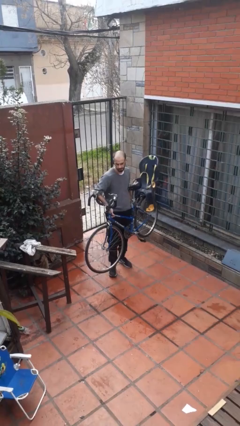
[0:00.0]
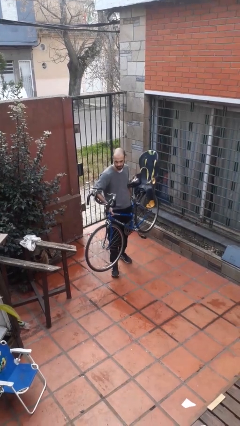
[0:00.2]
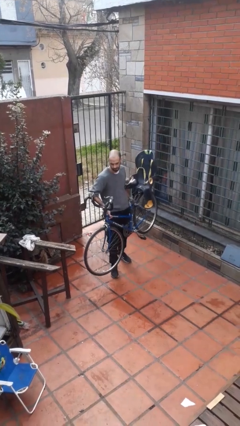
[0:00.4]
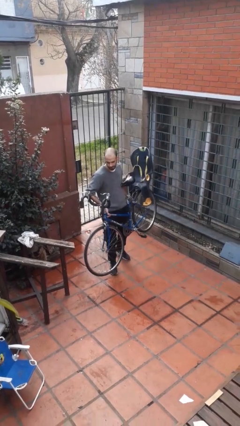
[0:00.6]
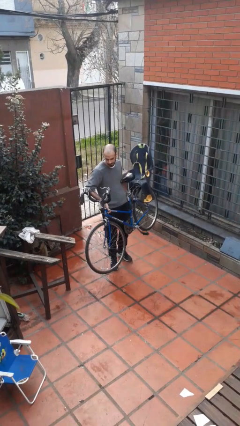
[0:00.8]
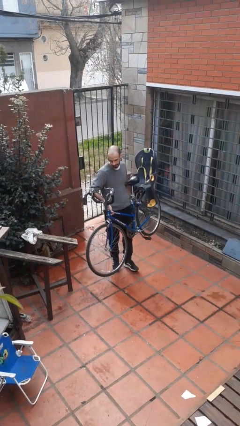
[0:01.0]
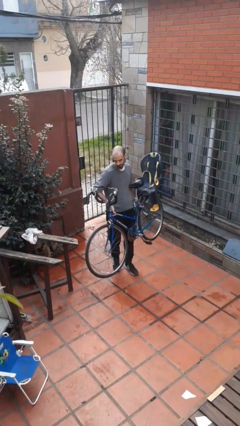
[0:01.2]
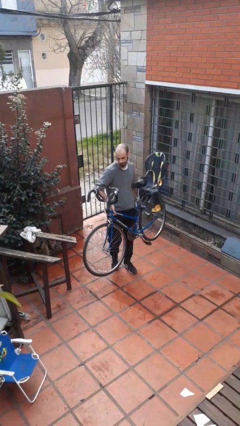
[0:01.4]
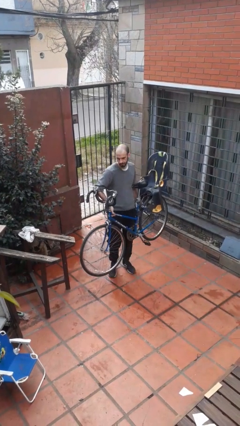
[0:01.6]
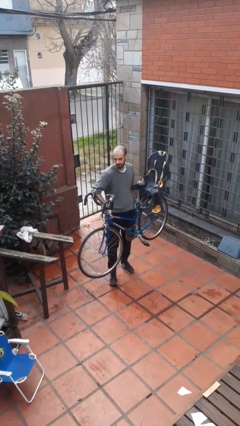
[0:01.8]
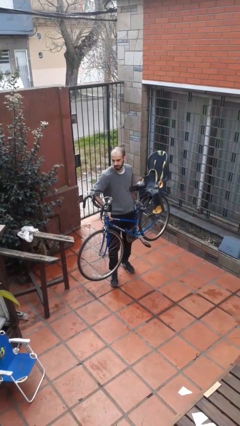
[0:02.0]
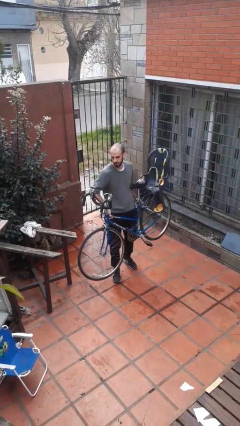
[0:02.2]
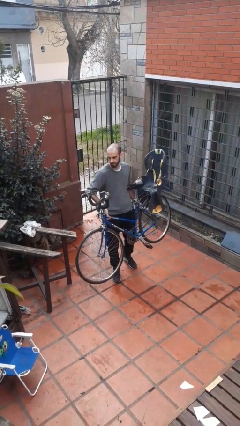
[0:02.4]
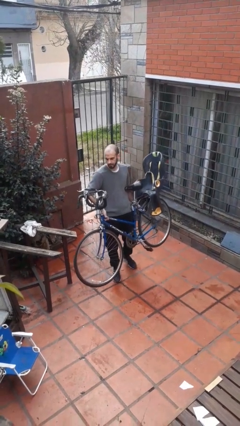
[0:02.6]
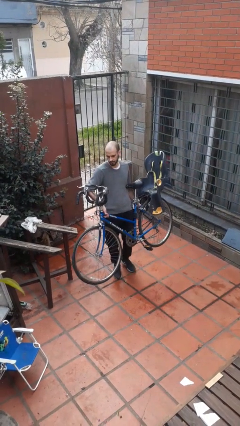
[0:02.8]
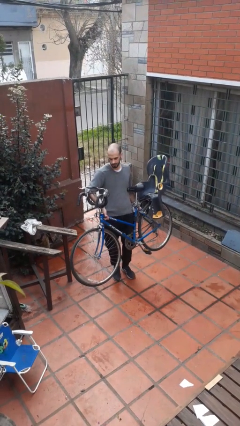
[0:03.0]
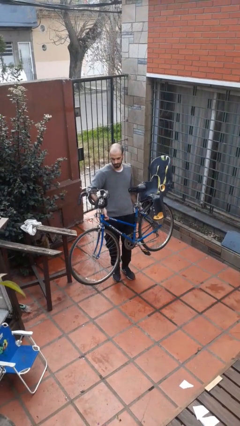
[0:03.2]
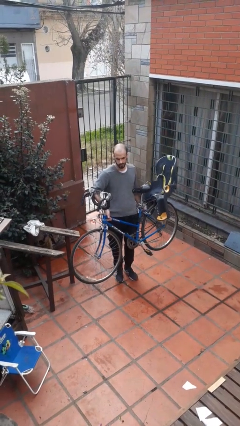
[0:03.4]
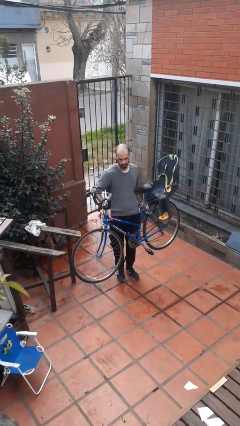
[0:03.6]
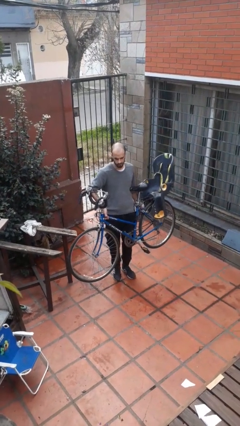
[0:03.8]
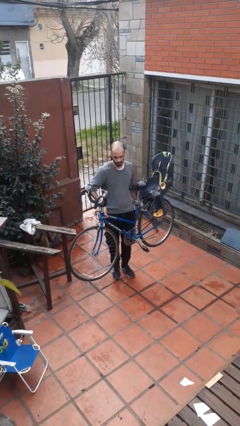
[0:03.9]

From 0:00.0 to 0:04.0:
person carries bicycle

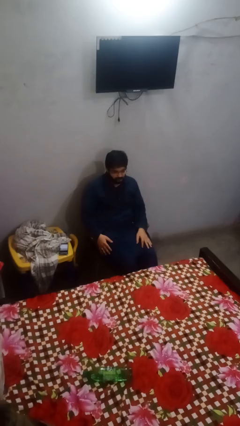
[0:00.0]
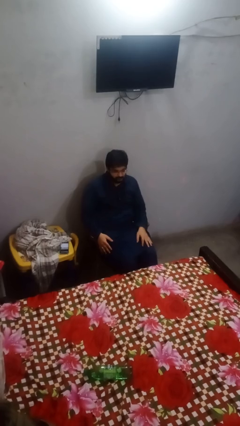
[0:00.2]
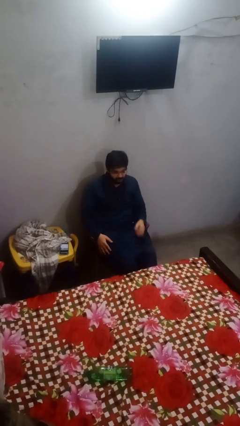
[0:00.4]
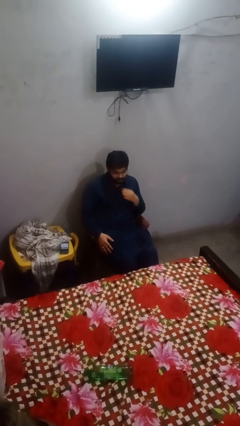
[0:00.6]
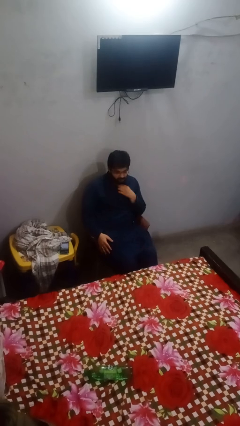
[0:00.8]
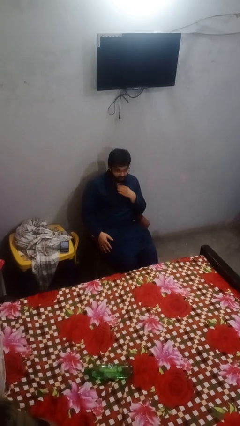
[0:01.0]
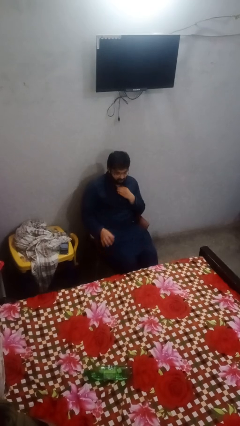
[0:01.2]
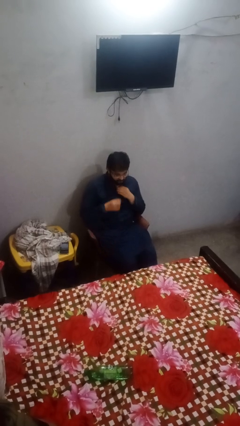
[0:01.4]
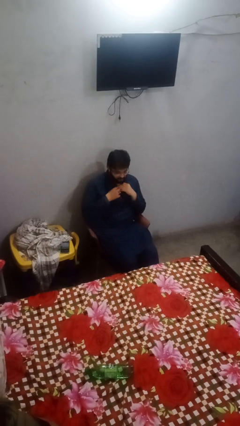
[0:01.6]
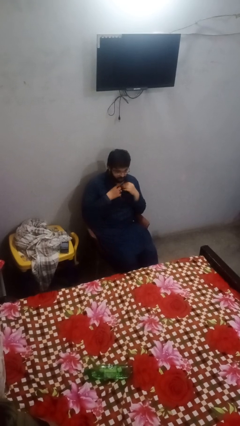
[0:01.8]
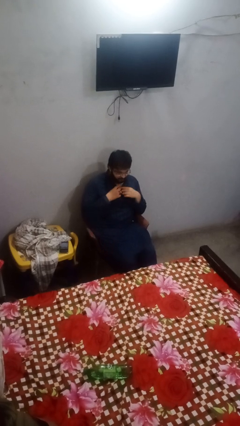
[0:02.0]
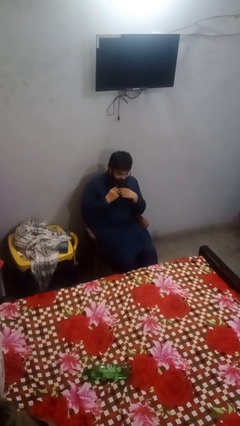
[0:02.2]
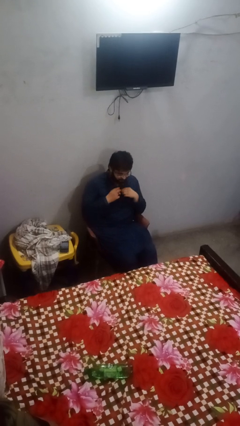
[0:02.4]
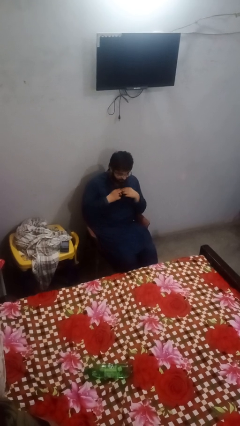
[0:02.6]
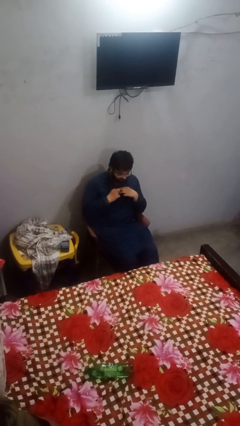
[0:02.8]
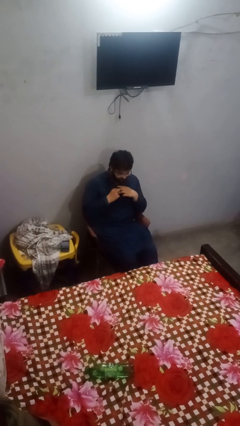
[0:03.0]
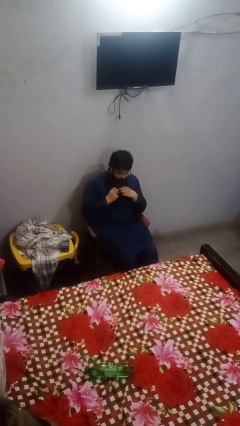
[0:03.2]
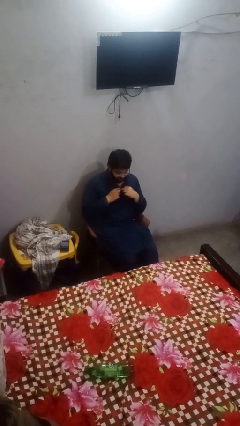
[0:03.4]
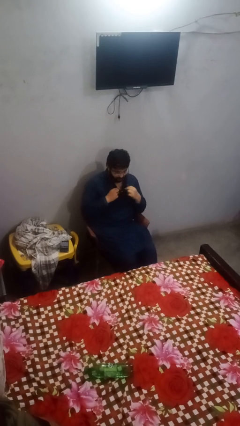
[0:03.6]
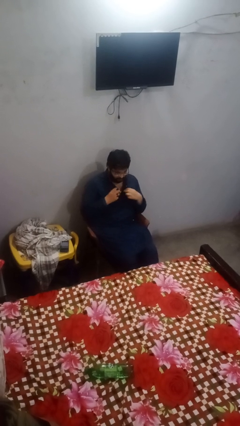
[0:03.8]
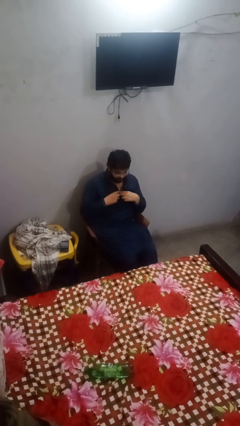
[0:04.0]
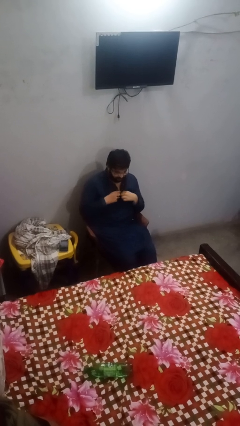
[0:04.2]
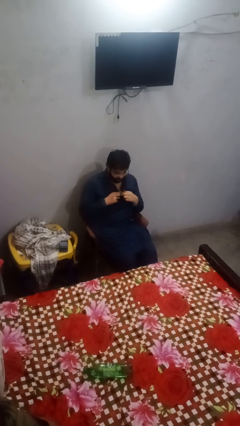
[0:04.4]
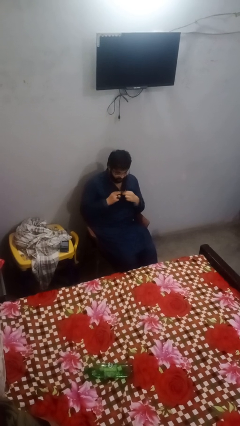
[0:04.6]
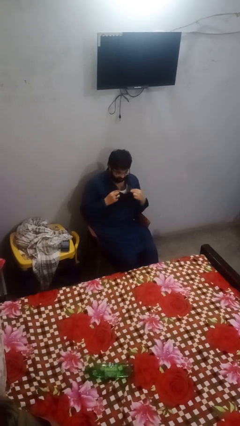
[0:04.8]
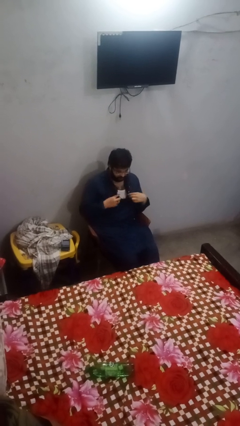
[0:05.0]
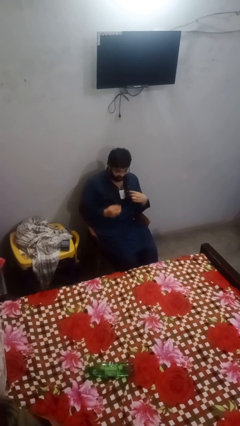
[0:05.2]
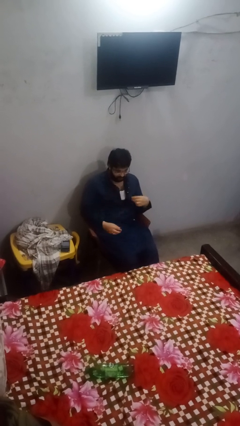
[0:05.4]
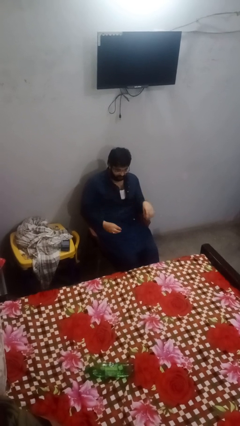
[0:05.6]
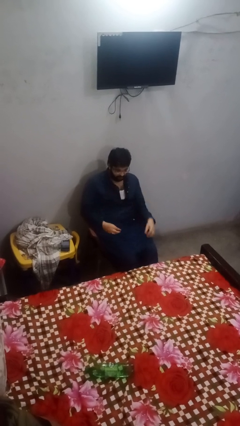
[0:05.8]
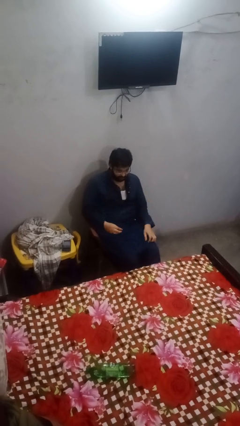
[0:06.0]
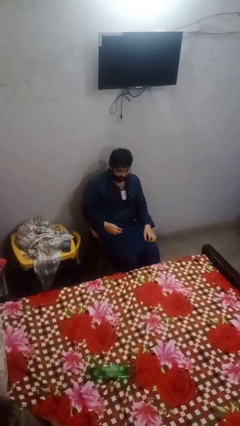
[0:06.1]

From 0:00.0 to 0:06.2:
person unbuttons shirt

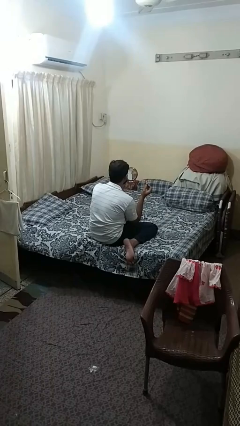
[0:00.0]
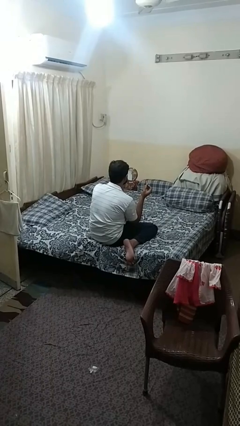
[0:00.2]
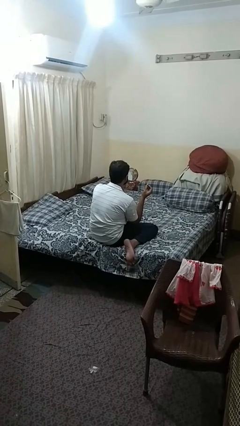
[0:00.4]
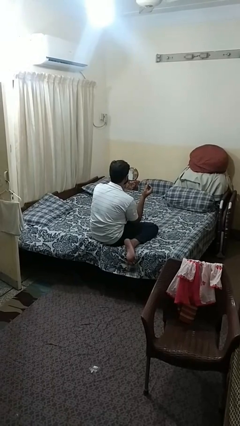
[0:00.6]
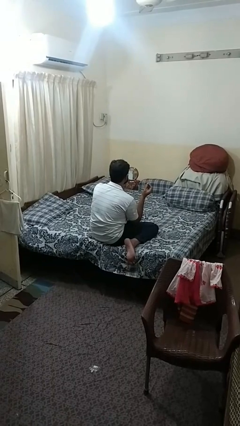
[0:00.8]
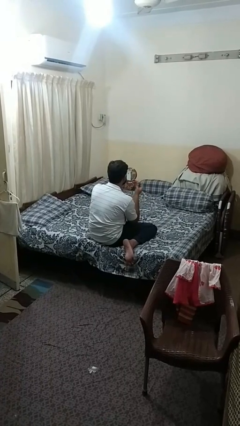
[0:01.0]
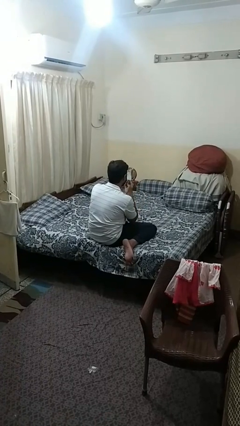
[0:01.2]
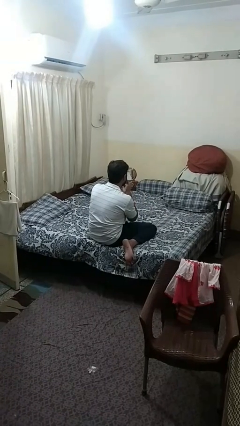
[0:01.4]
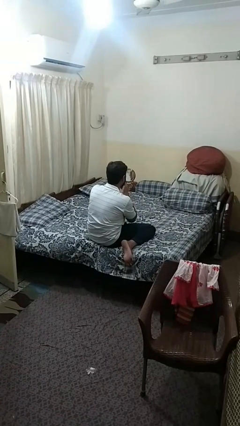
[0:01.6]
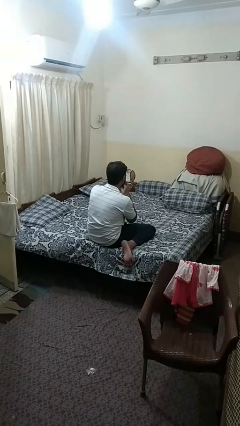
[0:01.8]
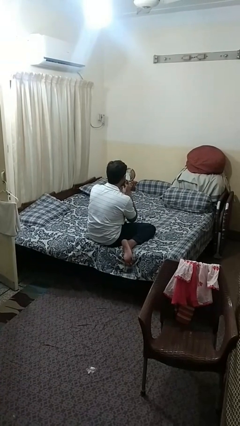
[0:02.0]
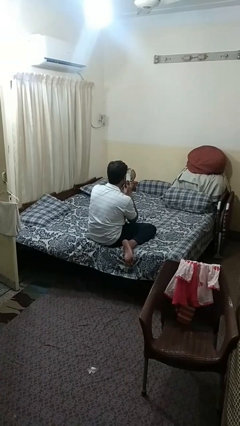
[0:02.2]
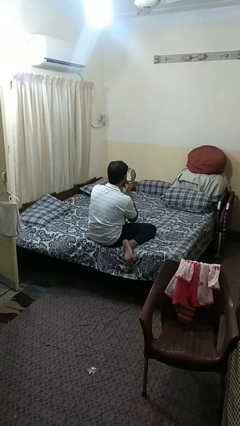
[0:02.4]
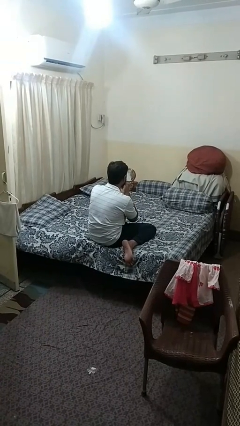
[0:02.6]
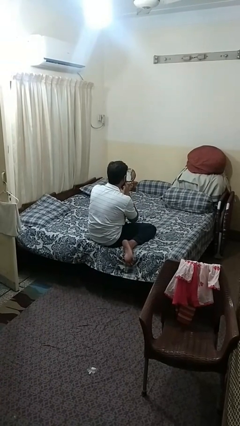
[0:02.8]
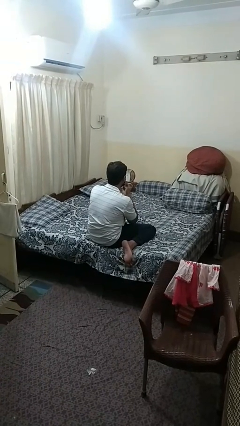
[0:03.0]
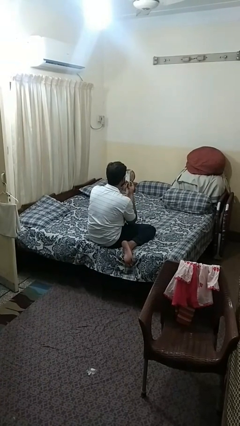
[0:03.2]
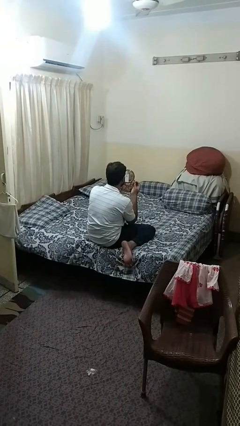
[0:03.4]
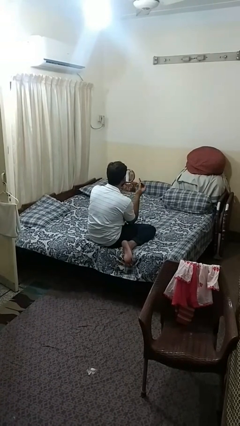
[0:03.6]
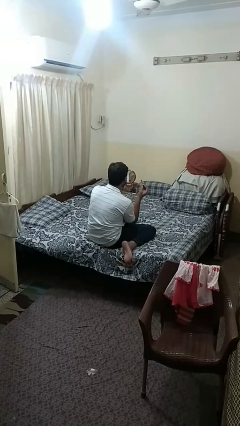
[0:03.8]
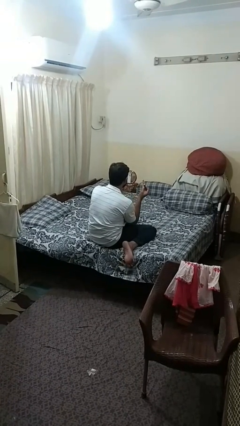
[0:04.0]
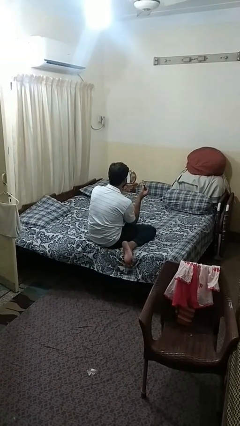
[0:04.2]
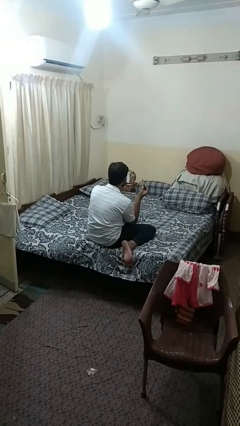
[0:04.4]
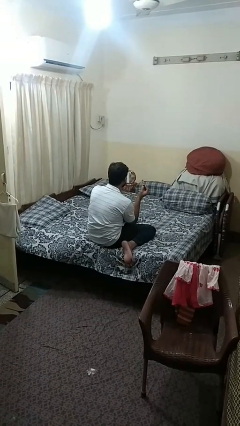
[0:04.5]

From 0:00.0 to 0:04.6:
person applies lip makeup

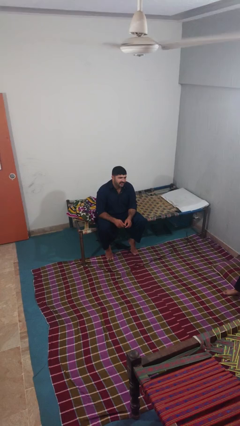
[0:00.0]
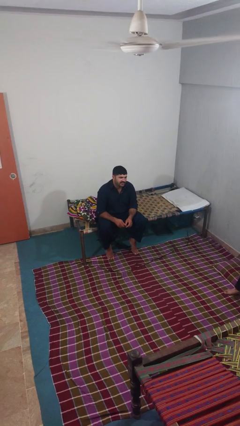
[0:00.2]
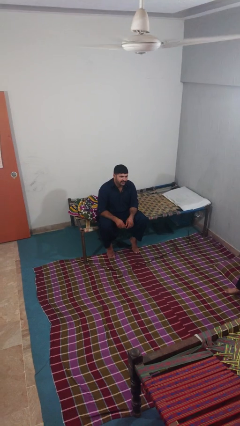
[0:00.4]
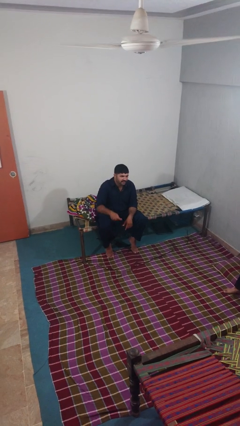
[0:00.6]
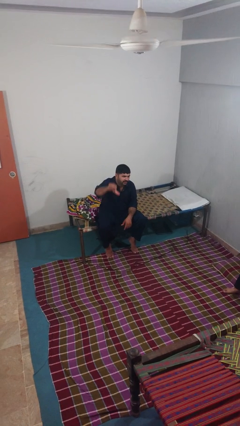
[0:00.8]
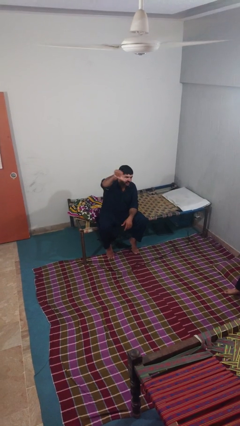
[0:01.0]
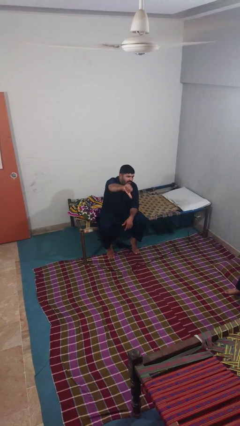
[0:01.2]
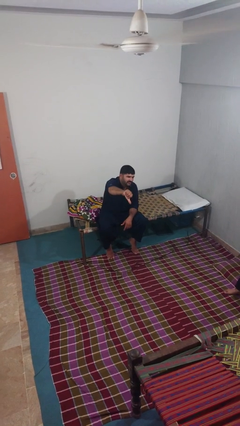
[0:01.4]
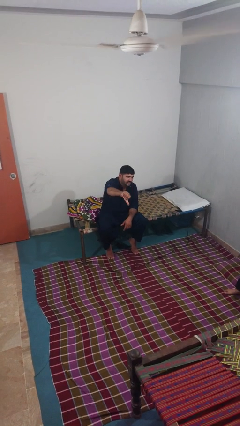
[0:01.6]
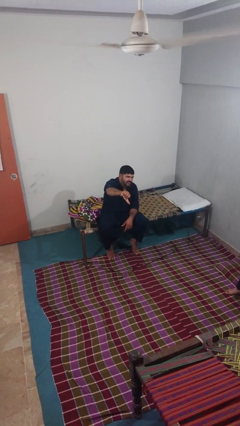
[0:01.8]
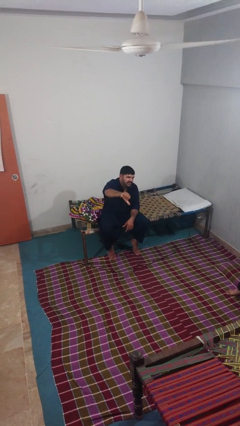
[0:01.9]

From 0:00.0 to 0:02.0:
person gestures thumbs down

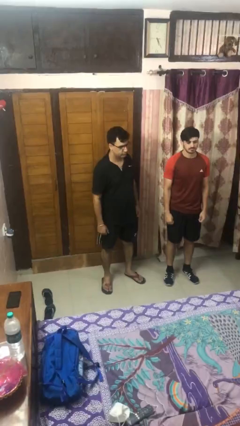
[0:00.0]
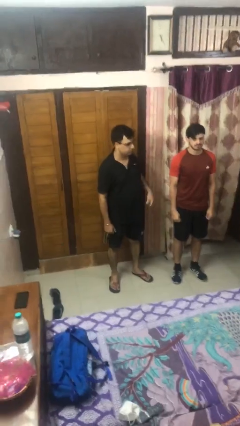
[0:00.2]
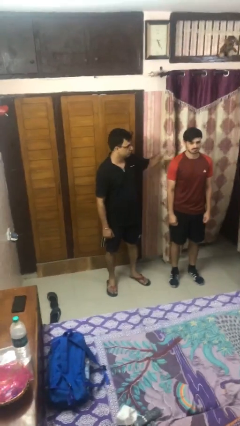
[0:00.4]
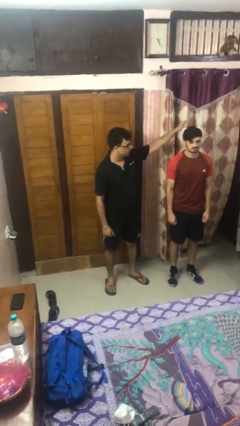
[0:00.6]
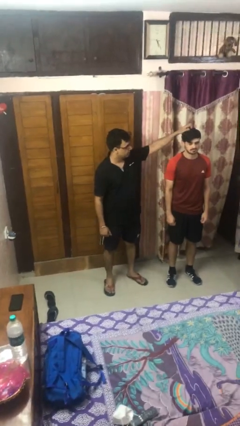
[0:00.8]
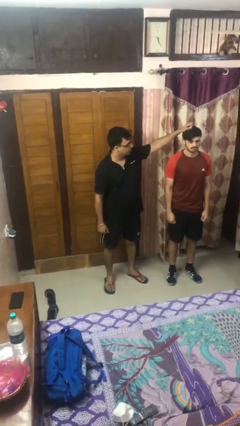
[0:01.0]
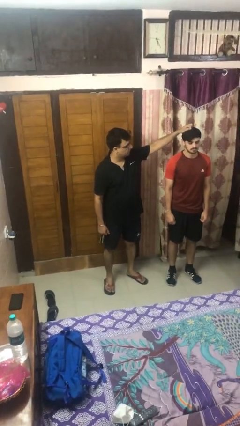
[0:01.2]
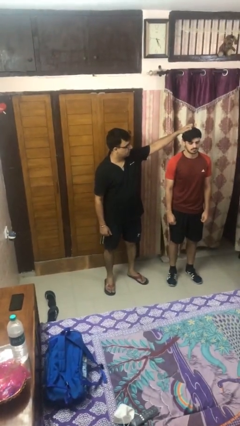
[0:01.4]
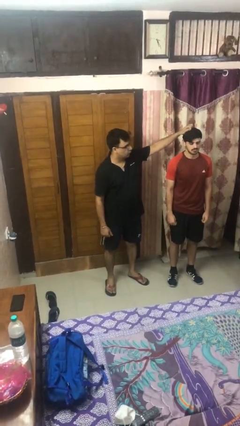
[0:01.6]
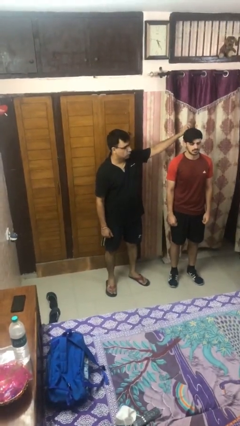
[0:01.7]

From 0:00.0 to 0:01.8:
person grabs person by hair
